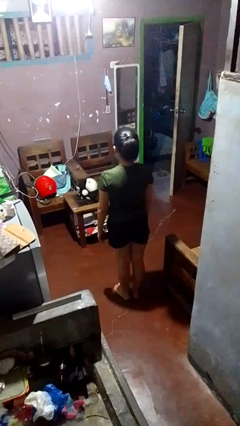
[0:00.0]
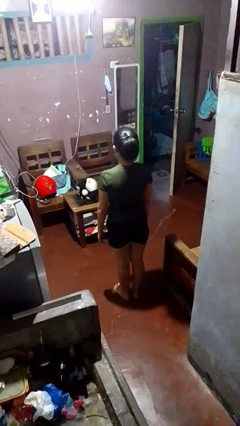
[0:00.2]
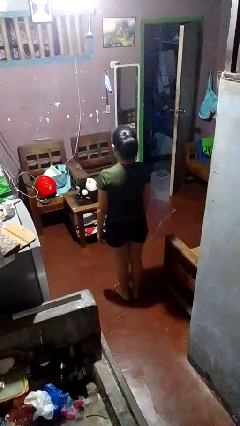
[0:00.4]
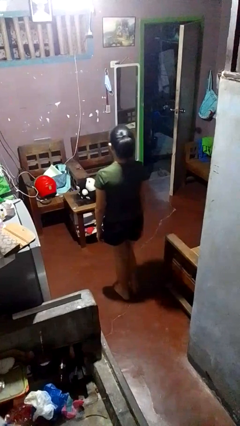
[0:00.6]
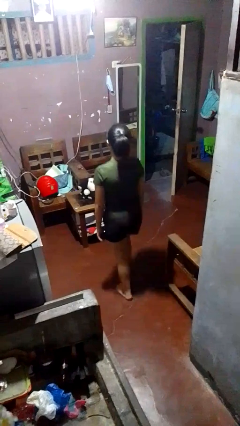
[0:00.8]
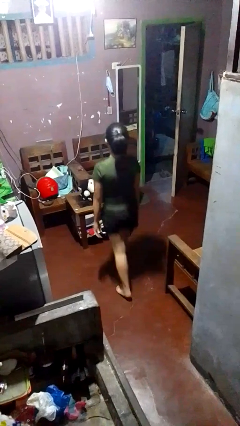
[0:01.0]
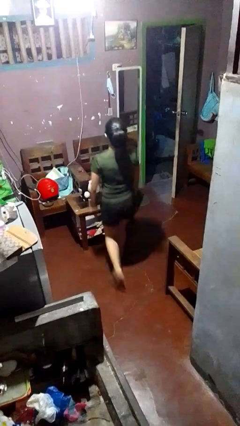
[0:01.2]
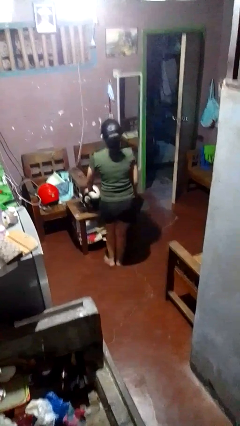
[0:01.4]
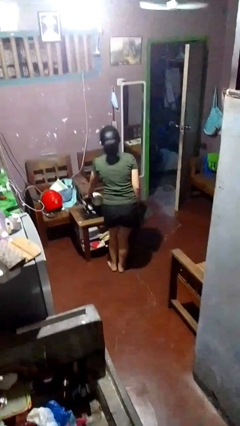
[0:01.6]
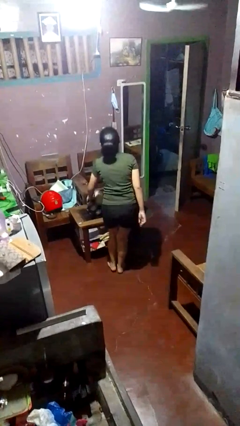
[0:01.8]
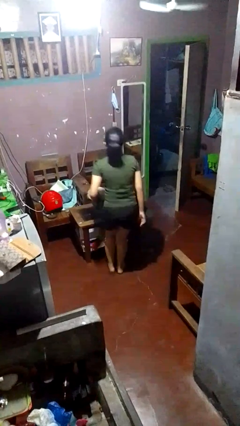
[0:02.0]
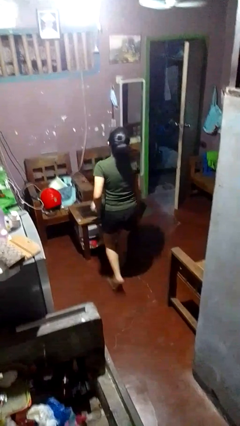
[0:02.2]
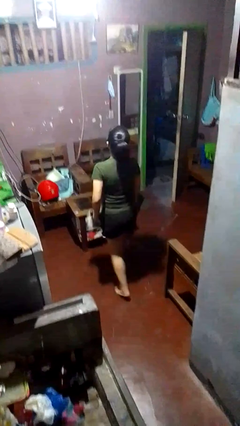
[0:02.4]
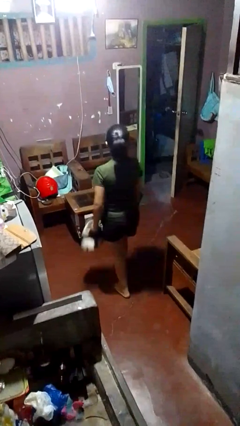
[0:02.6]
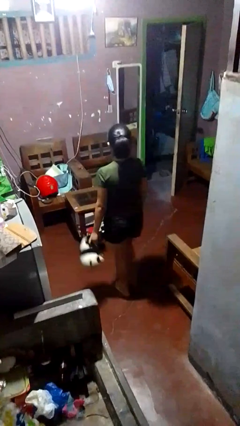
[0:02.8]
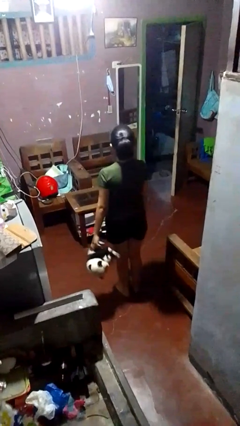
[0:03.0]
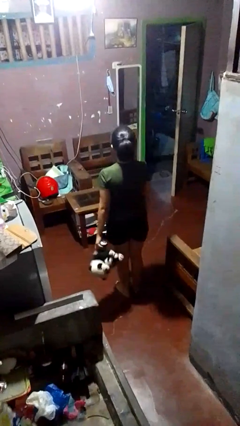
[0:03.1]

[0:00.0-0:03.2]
person picks up object from table

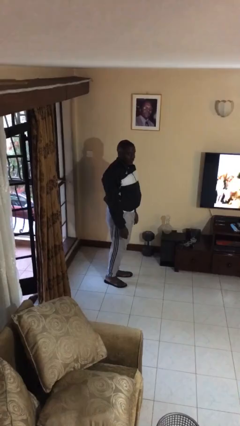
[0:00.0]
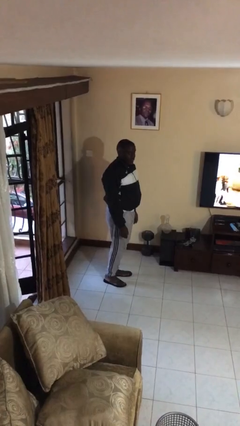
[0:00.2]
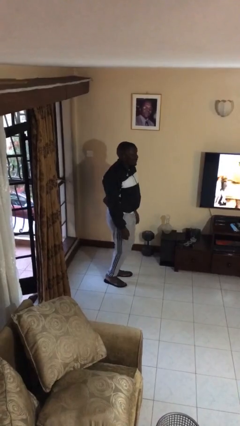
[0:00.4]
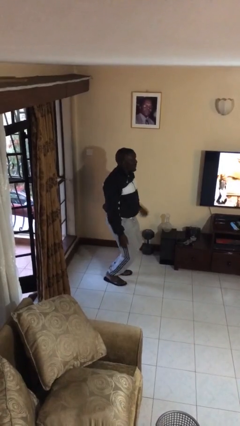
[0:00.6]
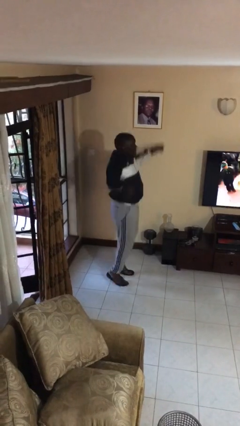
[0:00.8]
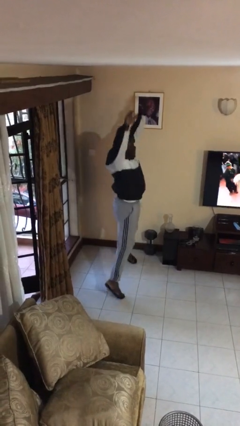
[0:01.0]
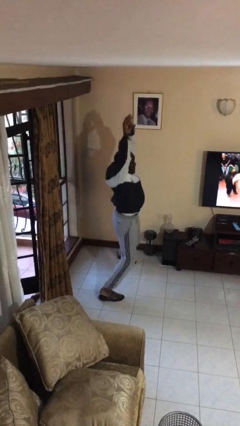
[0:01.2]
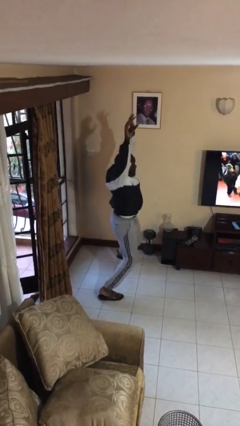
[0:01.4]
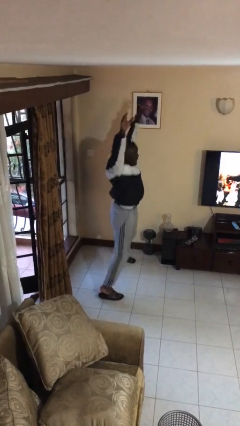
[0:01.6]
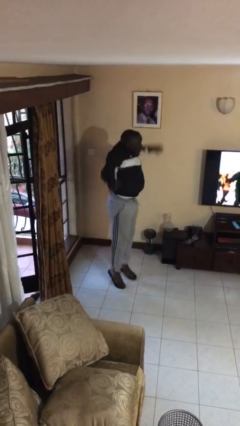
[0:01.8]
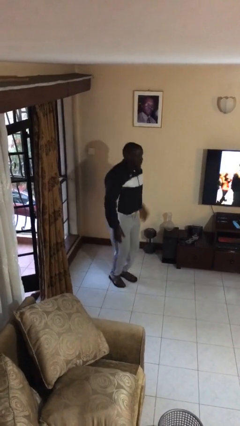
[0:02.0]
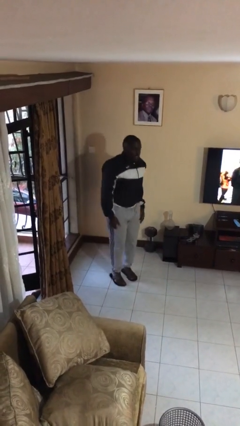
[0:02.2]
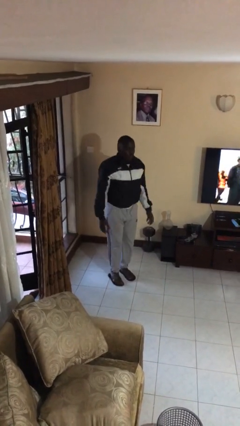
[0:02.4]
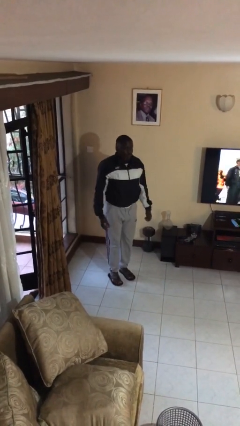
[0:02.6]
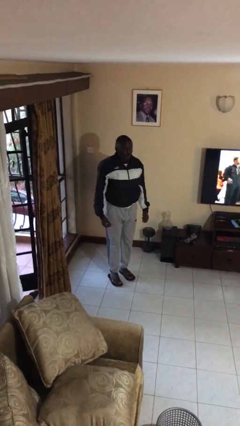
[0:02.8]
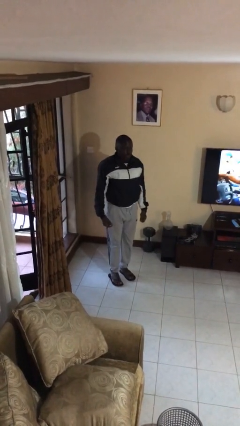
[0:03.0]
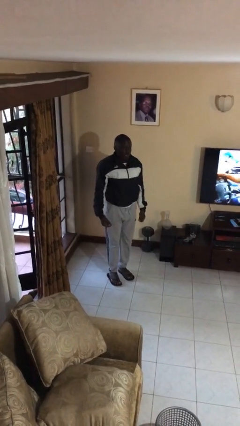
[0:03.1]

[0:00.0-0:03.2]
person exercises with jumping jacks

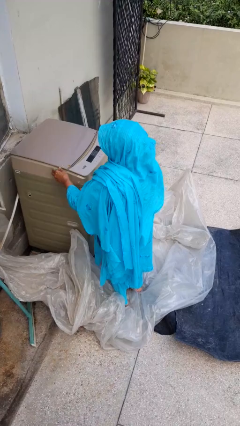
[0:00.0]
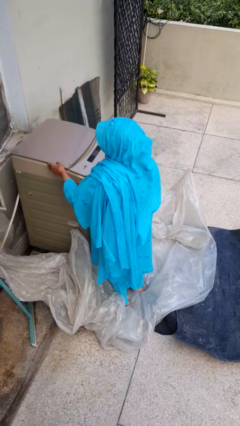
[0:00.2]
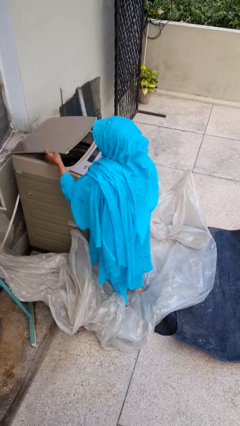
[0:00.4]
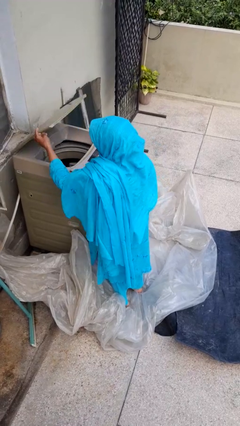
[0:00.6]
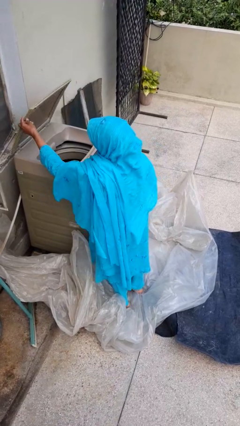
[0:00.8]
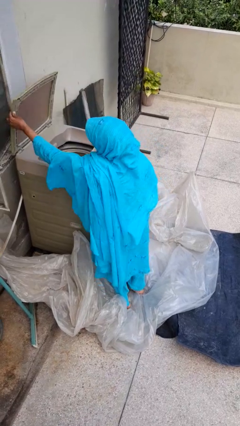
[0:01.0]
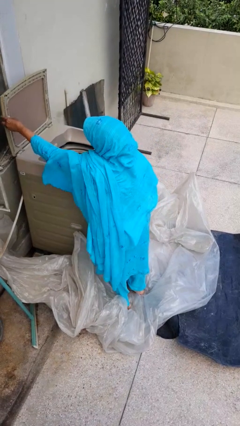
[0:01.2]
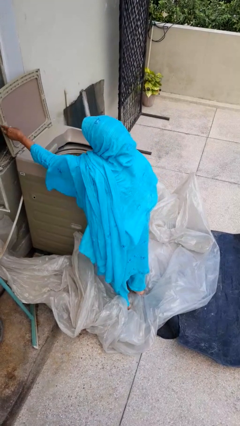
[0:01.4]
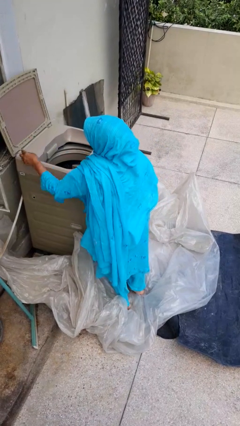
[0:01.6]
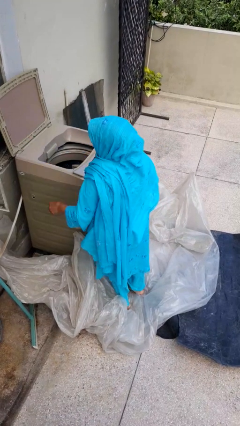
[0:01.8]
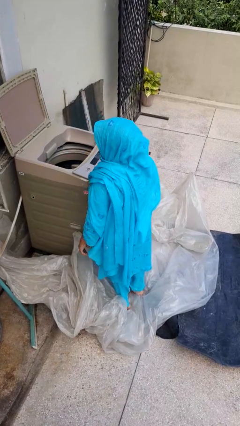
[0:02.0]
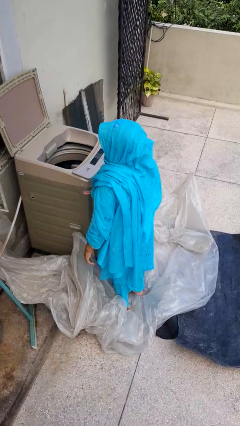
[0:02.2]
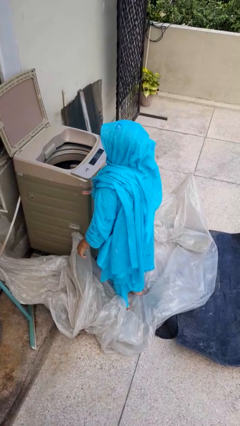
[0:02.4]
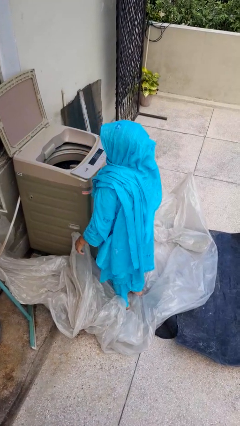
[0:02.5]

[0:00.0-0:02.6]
person opens clothes washer

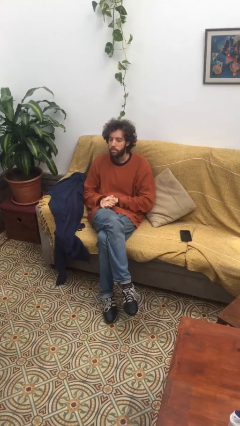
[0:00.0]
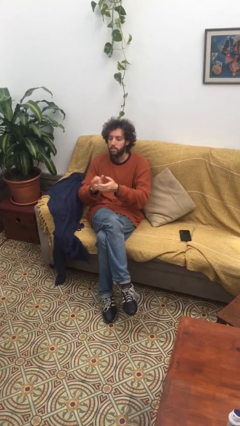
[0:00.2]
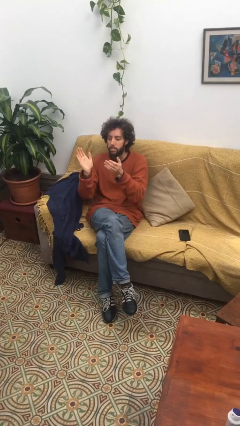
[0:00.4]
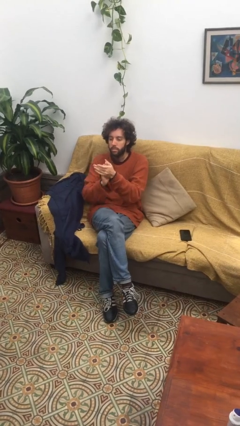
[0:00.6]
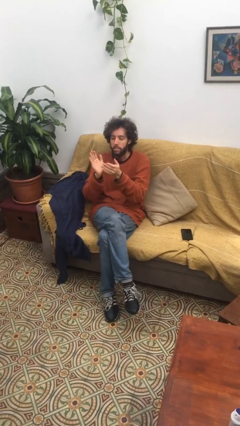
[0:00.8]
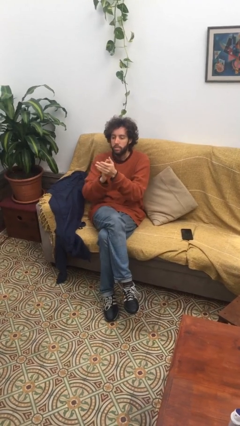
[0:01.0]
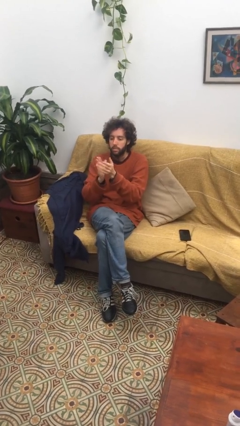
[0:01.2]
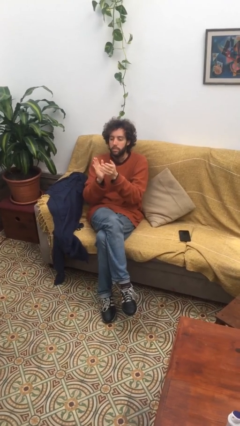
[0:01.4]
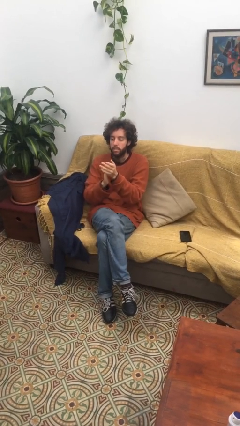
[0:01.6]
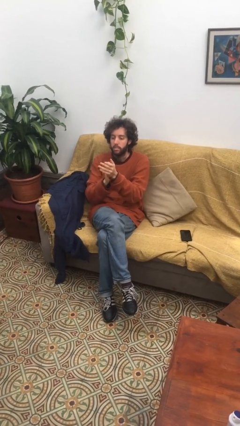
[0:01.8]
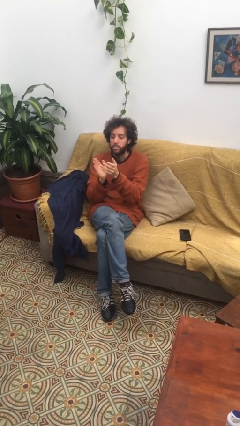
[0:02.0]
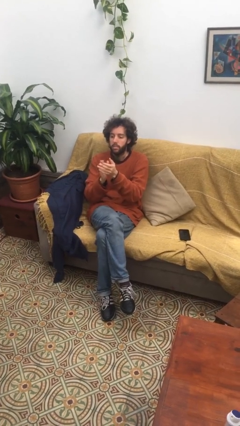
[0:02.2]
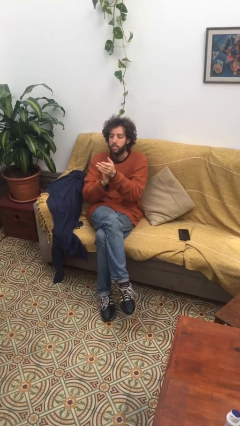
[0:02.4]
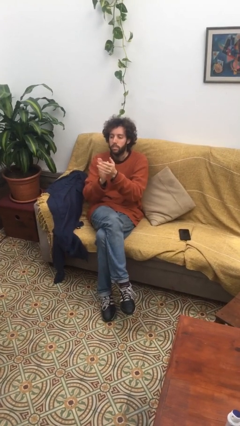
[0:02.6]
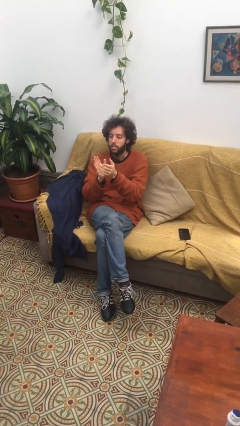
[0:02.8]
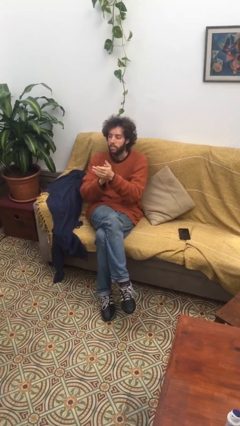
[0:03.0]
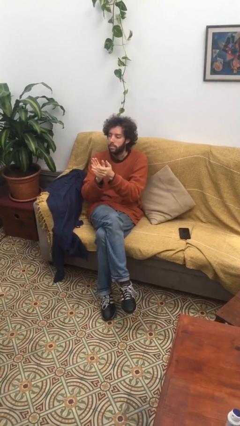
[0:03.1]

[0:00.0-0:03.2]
person claps hands

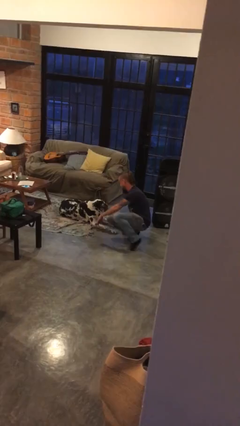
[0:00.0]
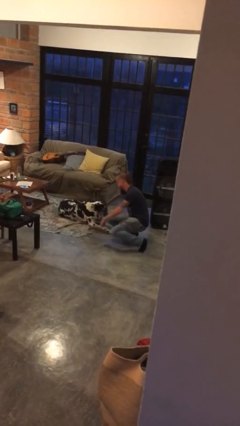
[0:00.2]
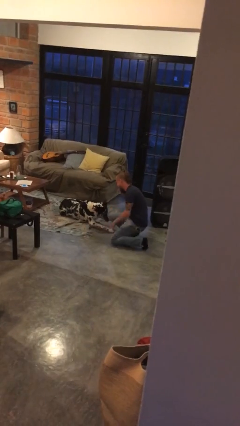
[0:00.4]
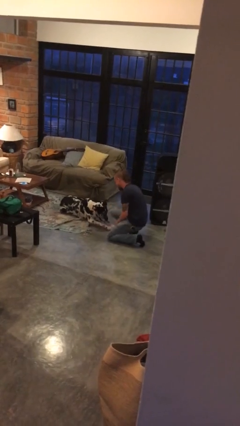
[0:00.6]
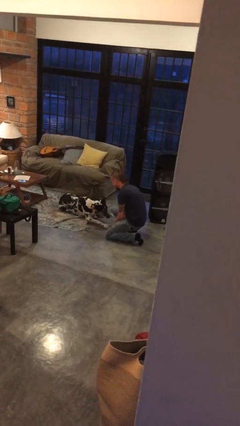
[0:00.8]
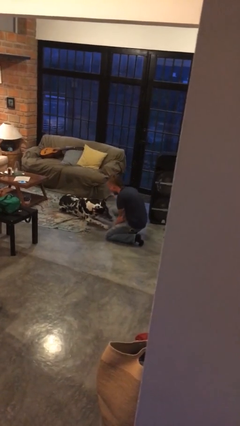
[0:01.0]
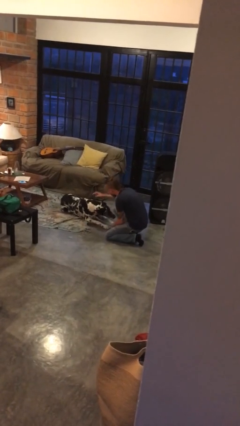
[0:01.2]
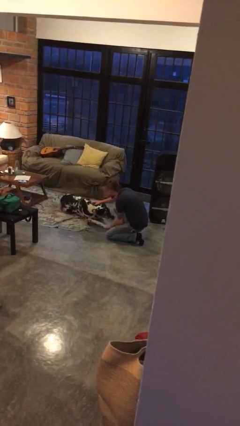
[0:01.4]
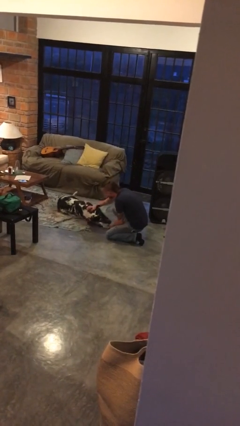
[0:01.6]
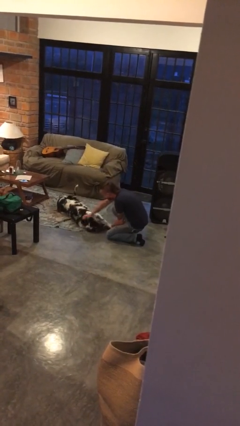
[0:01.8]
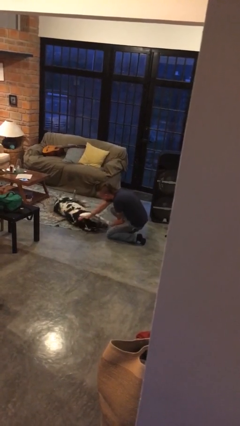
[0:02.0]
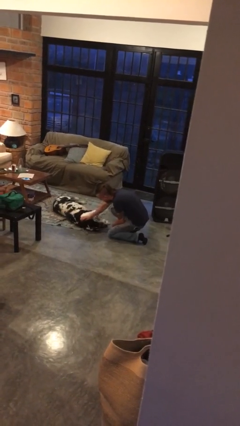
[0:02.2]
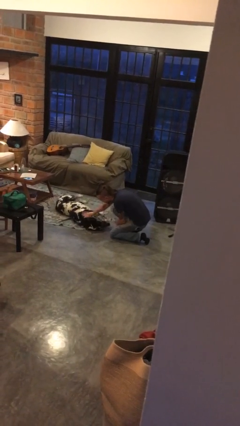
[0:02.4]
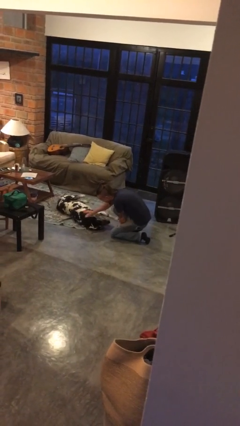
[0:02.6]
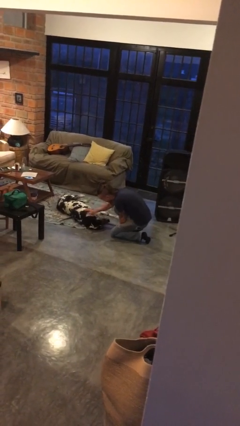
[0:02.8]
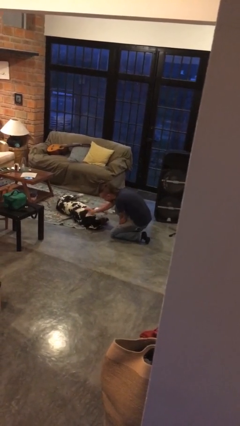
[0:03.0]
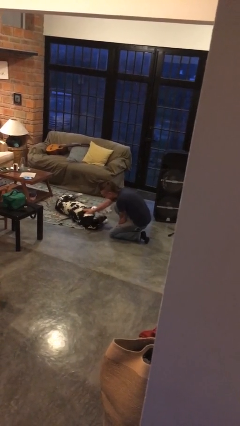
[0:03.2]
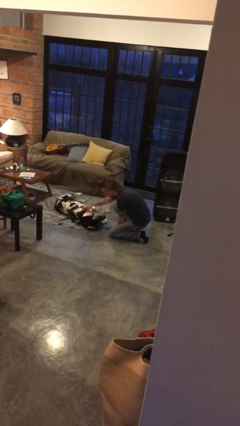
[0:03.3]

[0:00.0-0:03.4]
person pets dog

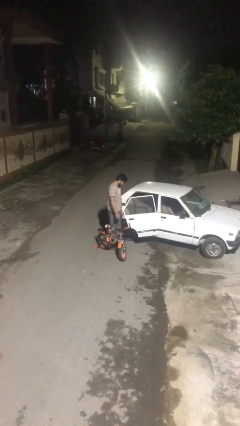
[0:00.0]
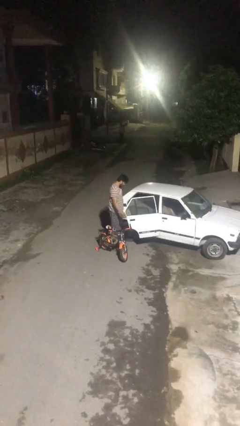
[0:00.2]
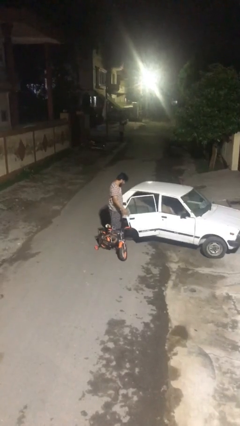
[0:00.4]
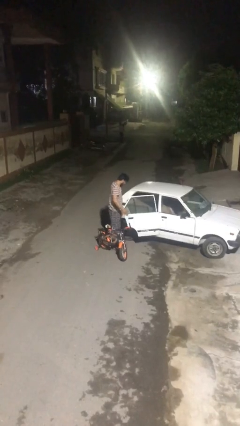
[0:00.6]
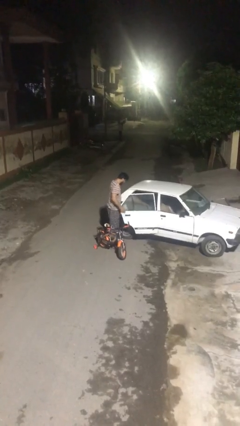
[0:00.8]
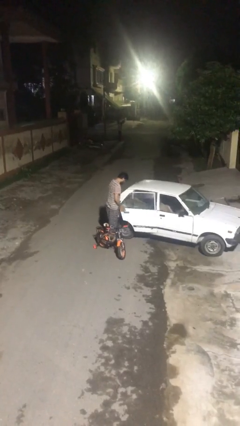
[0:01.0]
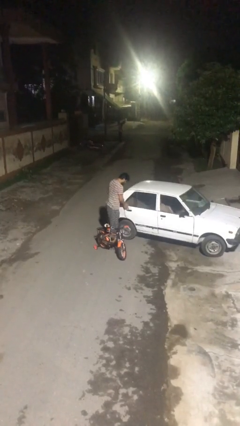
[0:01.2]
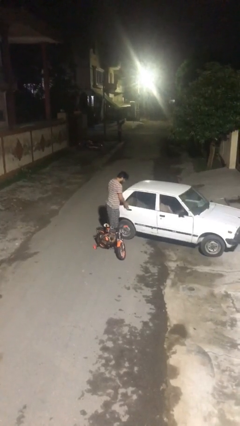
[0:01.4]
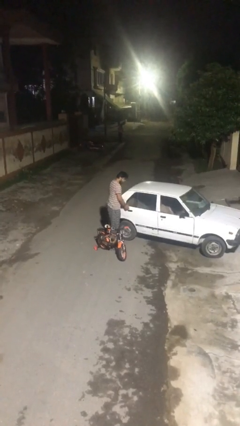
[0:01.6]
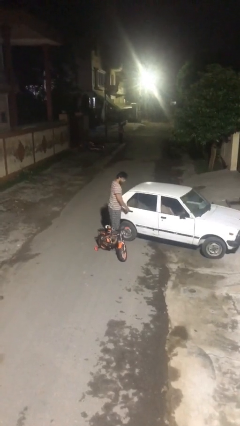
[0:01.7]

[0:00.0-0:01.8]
person closes car door
